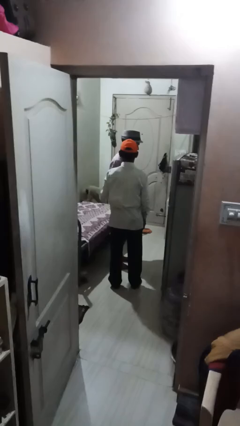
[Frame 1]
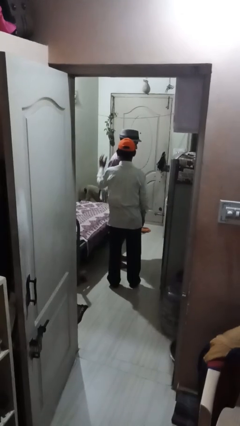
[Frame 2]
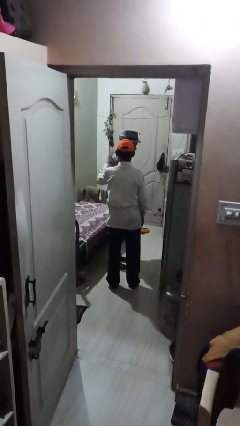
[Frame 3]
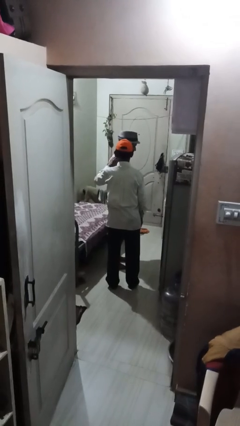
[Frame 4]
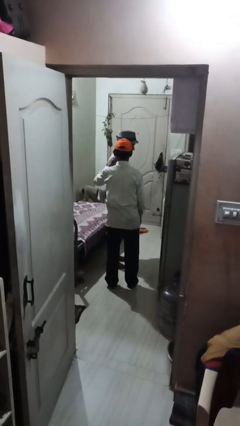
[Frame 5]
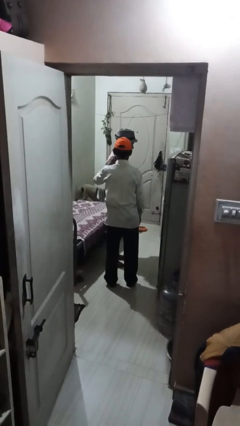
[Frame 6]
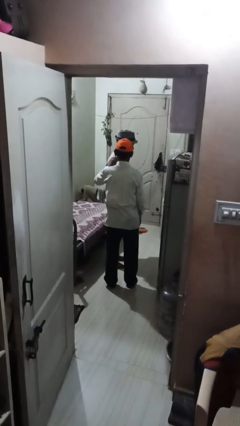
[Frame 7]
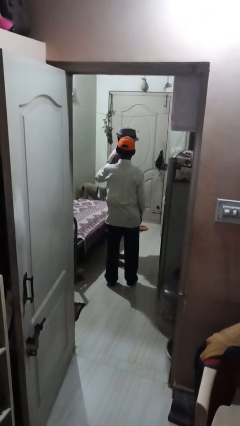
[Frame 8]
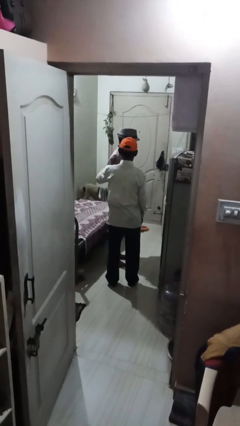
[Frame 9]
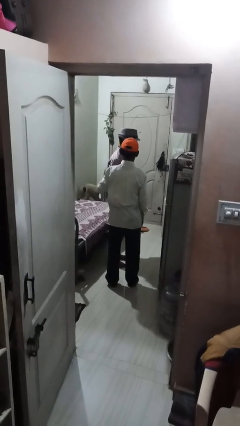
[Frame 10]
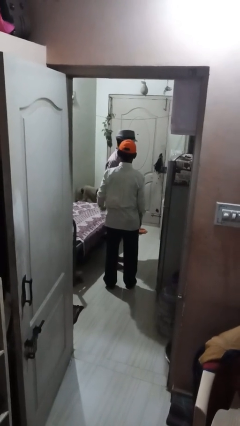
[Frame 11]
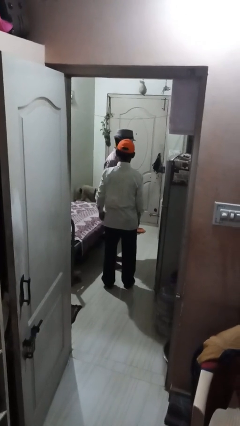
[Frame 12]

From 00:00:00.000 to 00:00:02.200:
person pounds shoulders of person

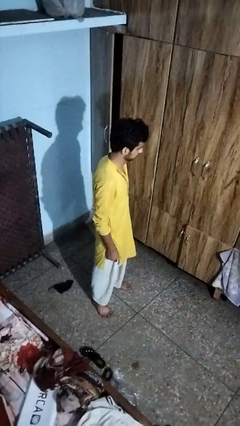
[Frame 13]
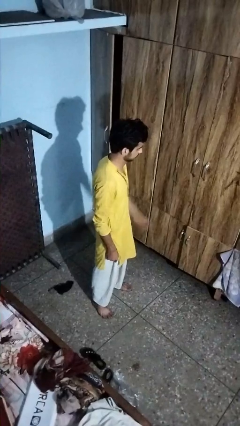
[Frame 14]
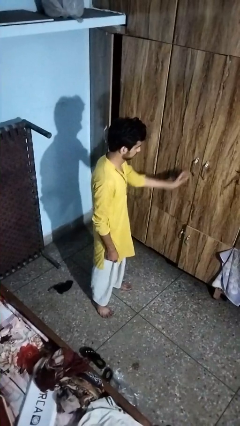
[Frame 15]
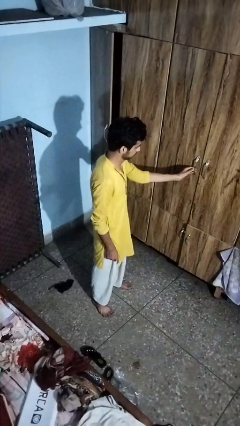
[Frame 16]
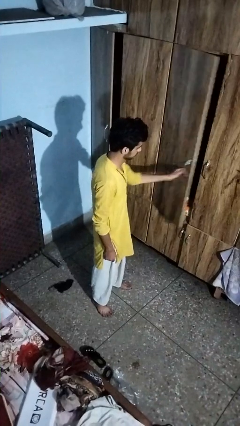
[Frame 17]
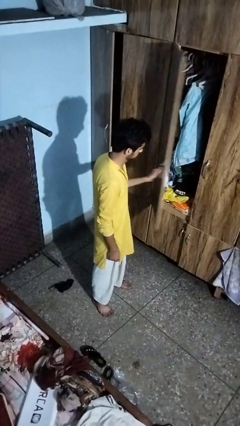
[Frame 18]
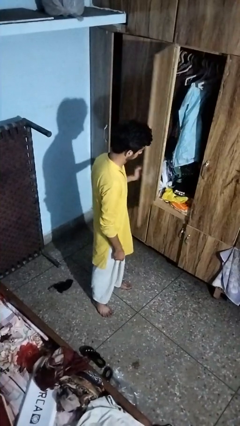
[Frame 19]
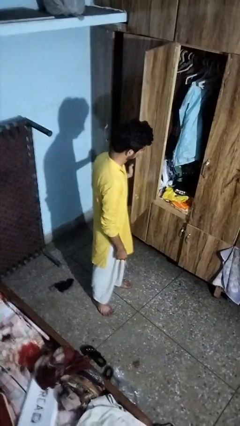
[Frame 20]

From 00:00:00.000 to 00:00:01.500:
person opens closet door

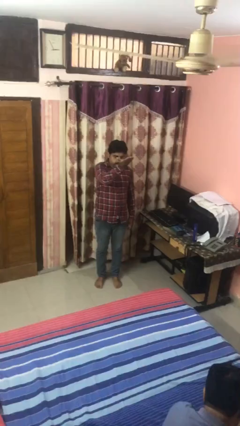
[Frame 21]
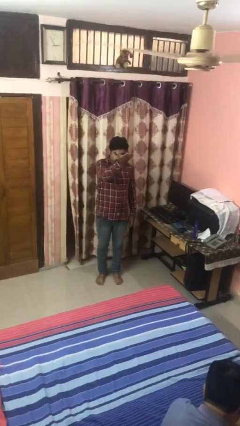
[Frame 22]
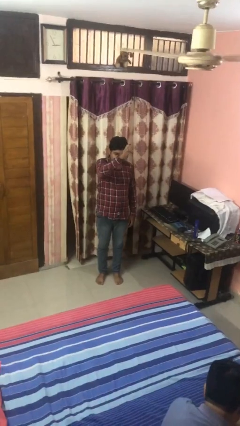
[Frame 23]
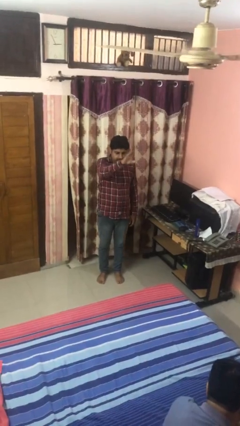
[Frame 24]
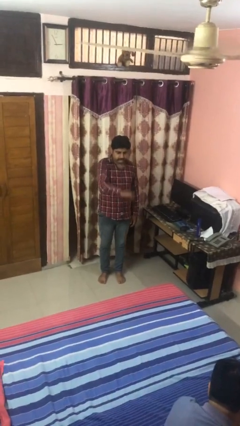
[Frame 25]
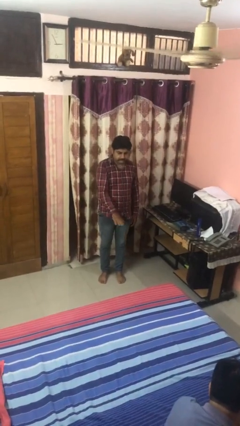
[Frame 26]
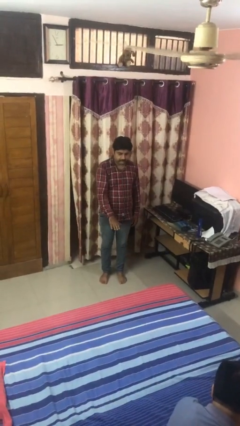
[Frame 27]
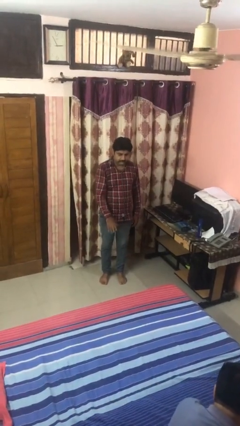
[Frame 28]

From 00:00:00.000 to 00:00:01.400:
person gestures swipe down

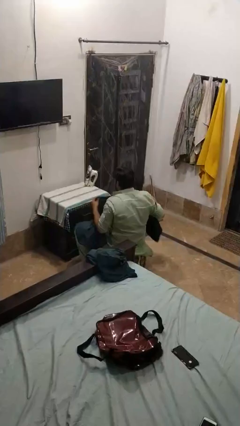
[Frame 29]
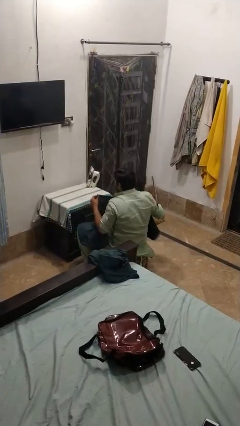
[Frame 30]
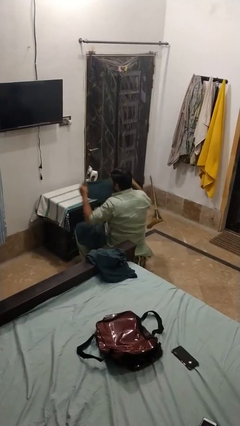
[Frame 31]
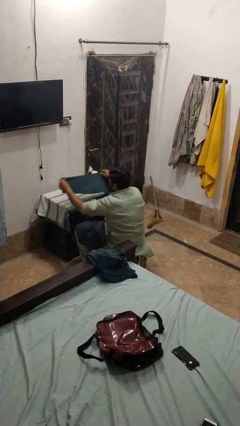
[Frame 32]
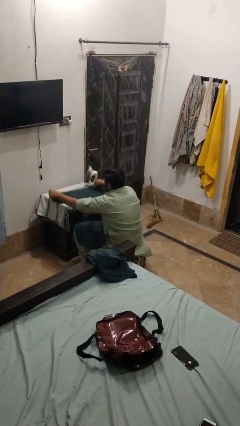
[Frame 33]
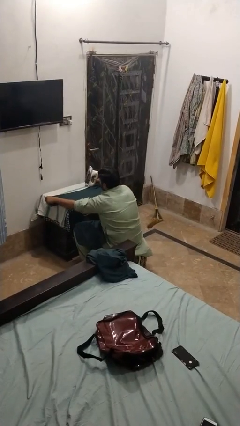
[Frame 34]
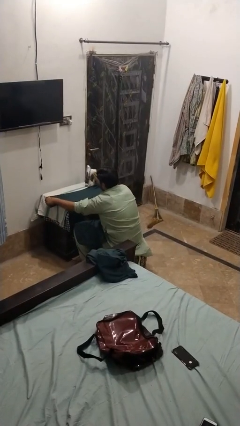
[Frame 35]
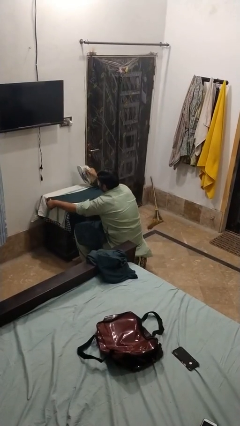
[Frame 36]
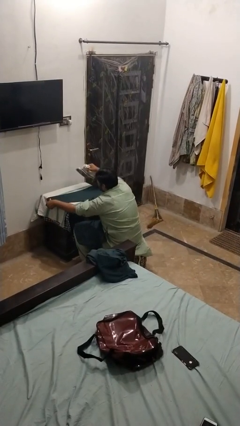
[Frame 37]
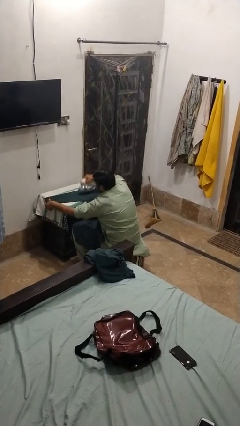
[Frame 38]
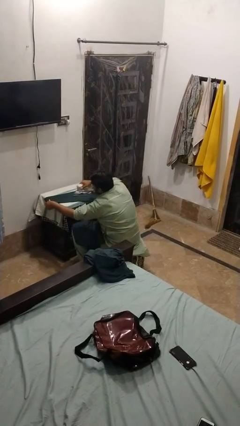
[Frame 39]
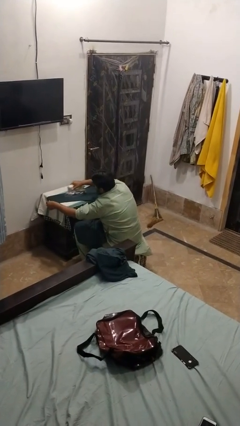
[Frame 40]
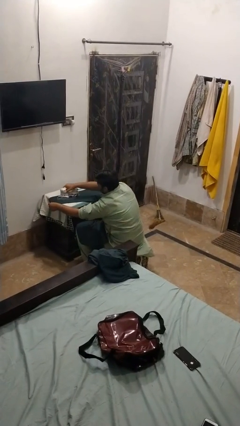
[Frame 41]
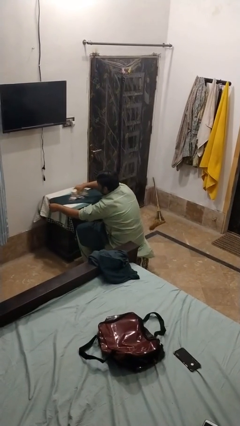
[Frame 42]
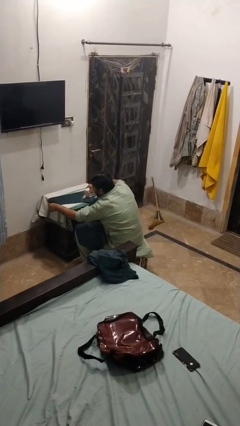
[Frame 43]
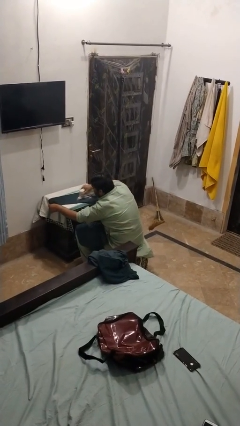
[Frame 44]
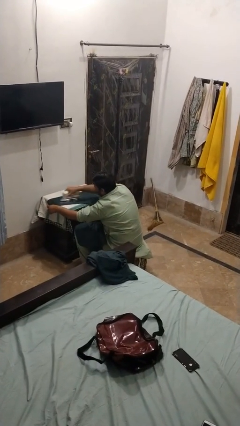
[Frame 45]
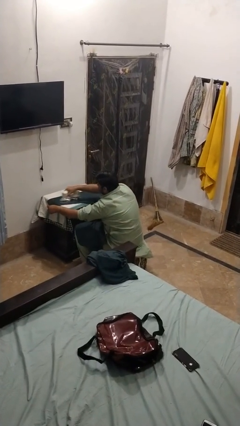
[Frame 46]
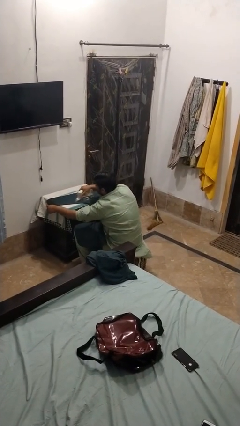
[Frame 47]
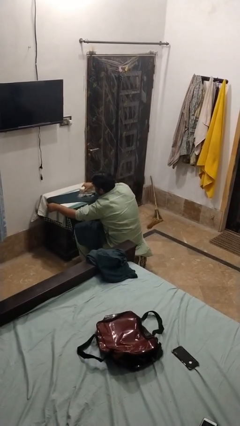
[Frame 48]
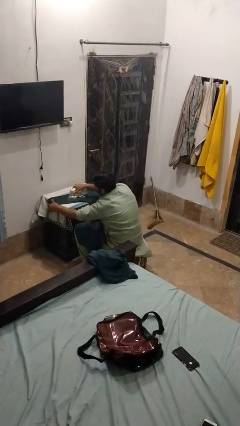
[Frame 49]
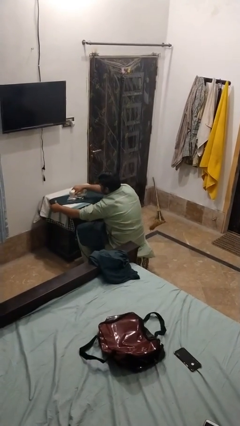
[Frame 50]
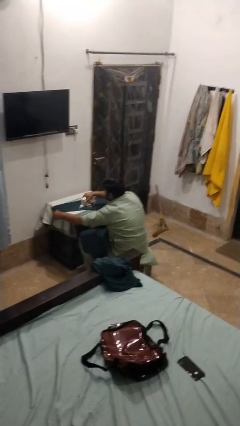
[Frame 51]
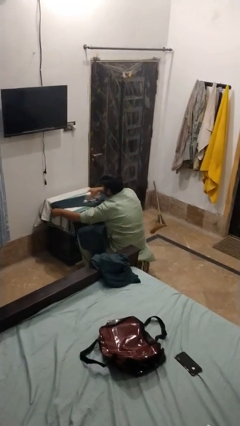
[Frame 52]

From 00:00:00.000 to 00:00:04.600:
person irons clothes

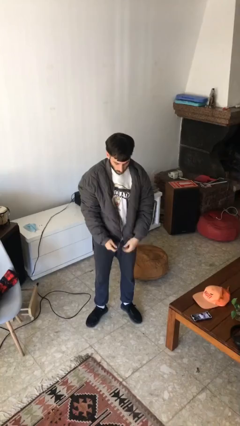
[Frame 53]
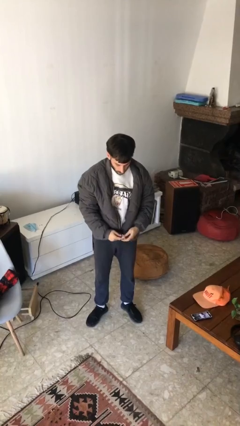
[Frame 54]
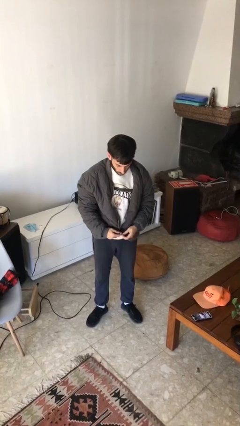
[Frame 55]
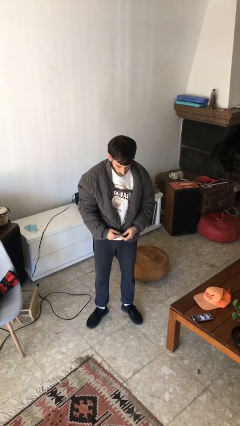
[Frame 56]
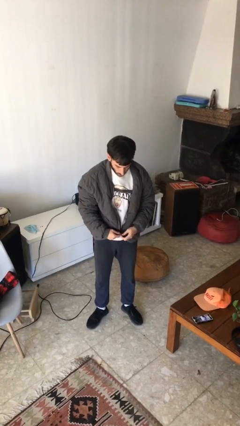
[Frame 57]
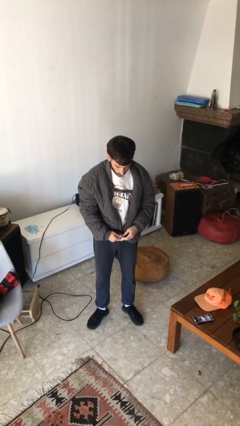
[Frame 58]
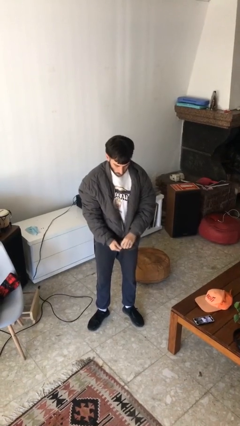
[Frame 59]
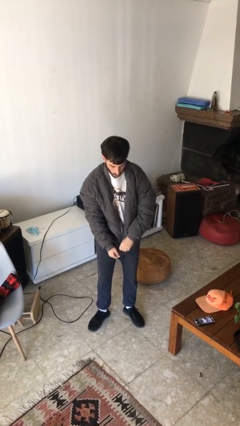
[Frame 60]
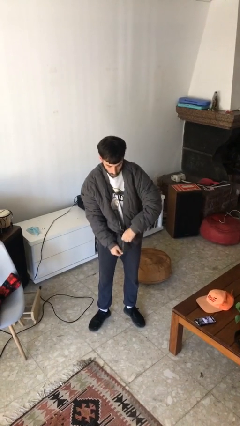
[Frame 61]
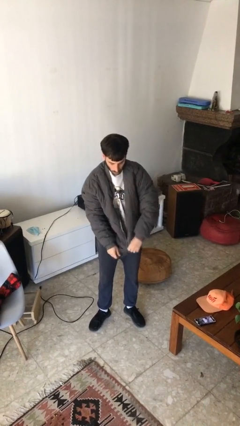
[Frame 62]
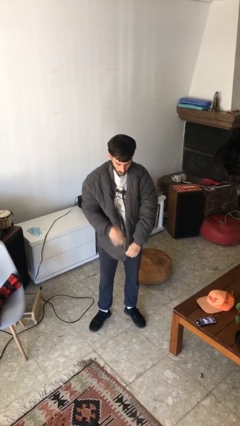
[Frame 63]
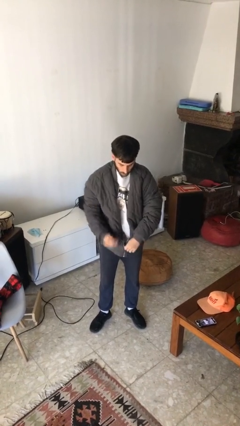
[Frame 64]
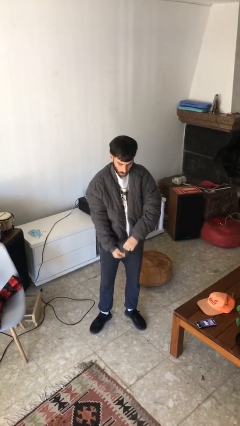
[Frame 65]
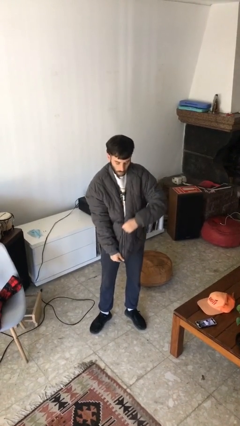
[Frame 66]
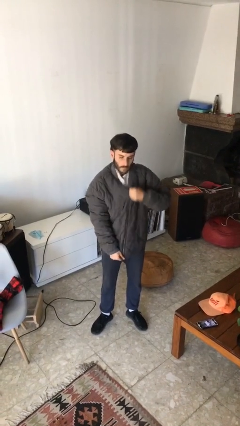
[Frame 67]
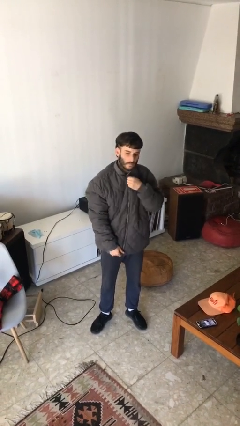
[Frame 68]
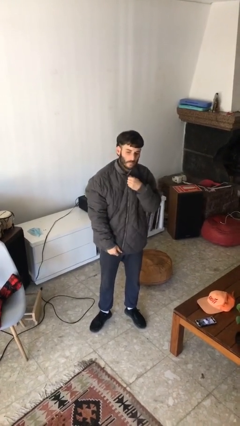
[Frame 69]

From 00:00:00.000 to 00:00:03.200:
person zips up jacket

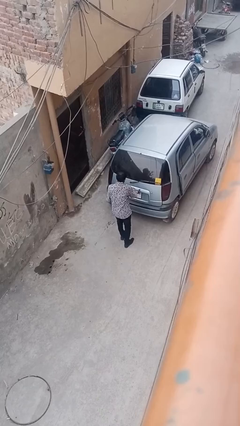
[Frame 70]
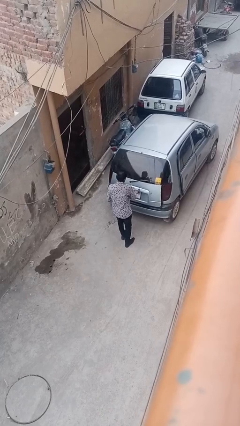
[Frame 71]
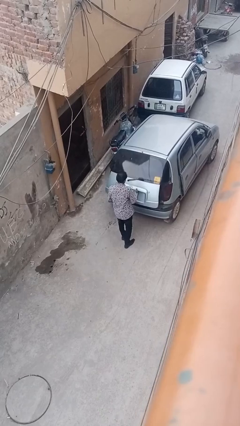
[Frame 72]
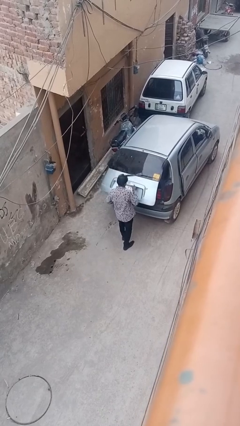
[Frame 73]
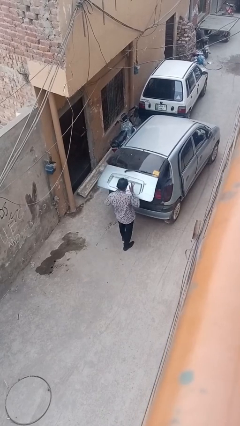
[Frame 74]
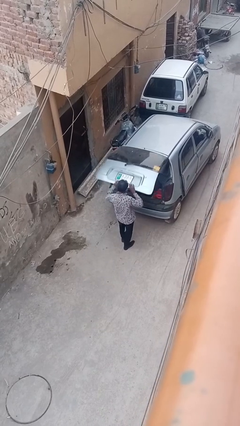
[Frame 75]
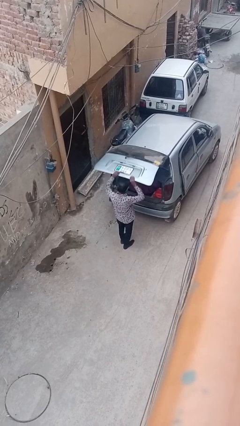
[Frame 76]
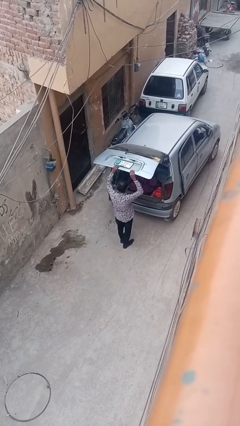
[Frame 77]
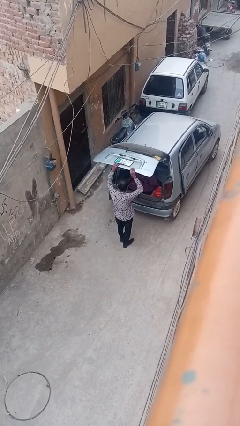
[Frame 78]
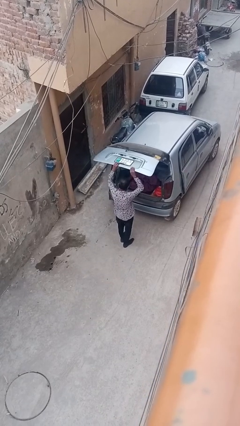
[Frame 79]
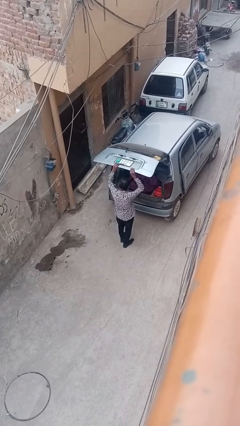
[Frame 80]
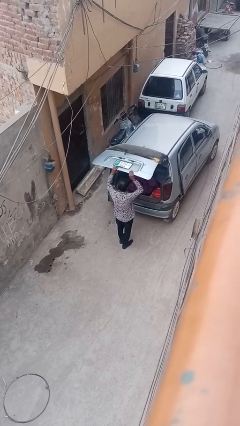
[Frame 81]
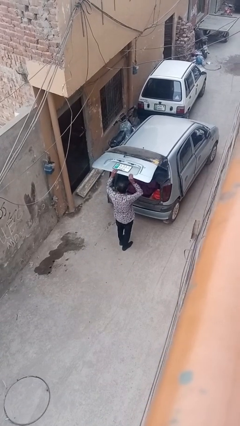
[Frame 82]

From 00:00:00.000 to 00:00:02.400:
person opens car trunk

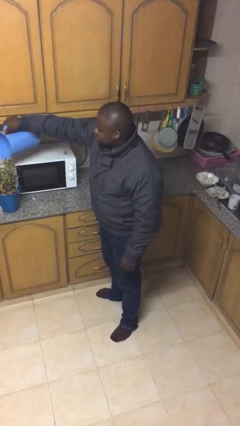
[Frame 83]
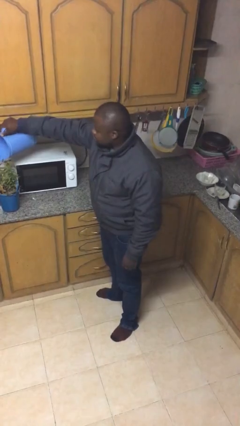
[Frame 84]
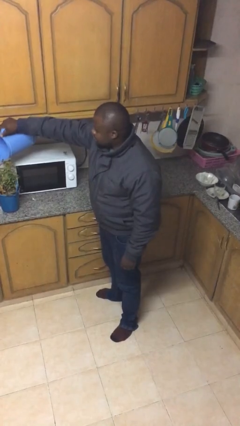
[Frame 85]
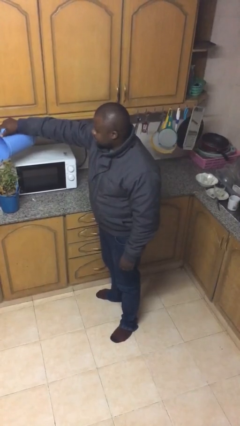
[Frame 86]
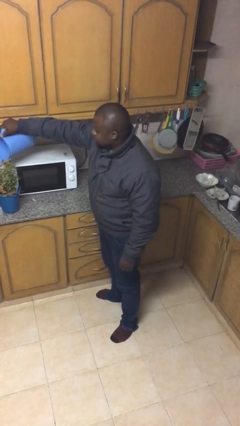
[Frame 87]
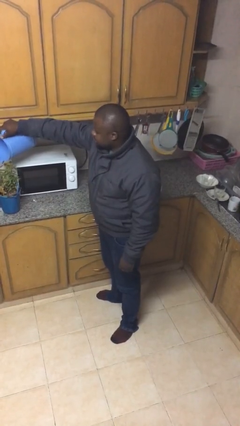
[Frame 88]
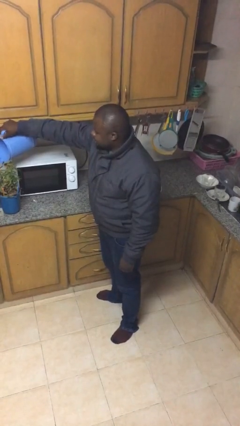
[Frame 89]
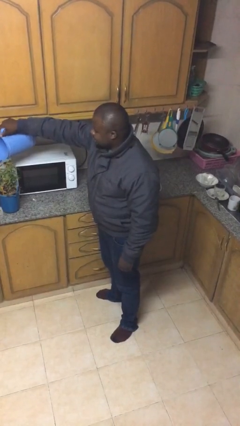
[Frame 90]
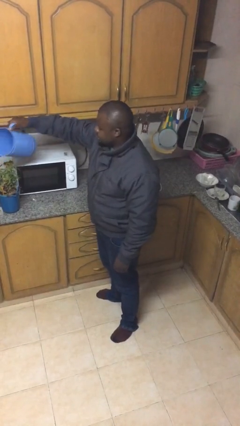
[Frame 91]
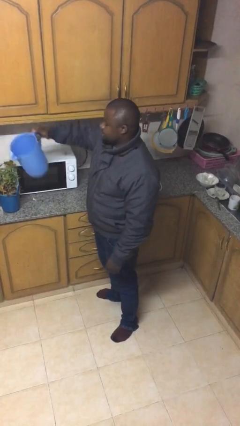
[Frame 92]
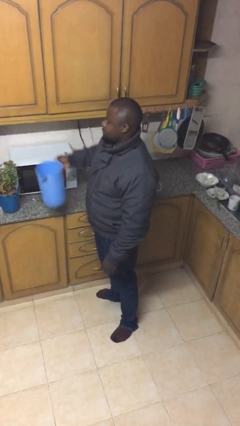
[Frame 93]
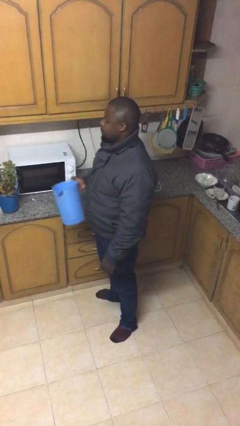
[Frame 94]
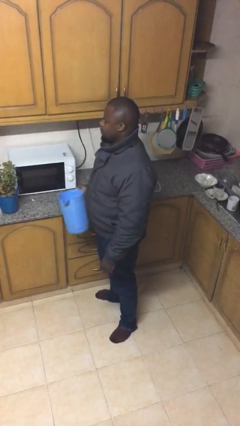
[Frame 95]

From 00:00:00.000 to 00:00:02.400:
person waters houseplant
